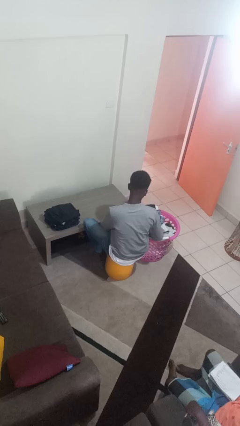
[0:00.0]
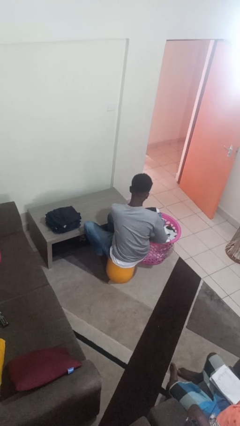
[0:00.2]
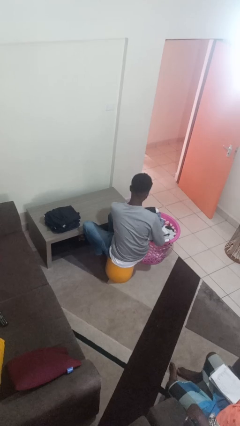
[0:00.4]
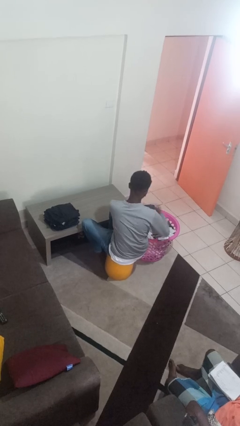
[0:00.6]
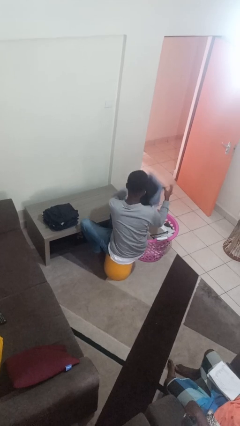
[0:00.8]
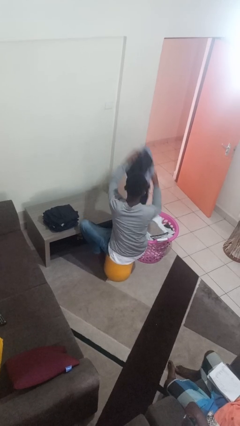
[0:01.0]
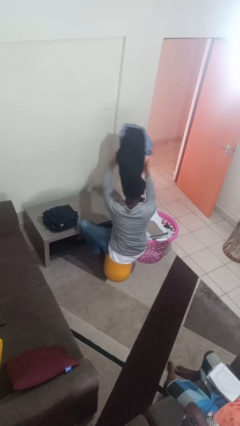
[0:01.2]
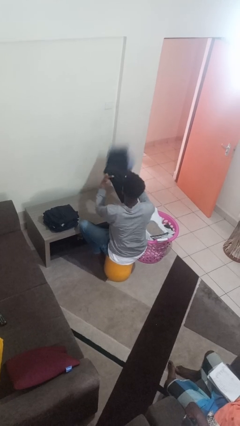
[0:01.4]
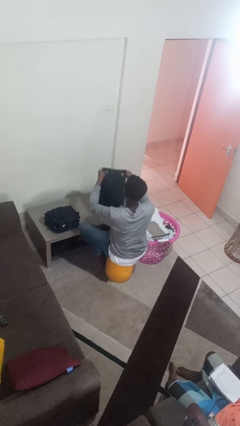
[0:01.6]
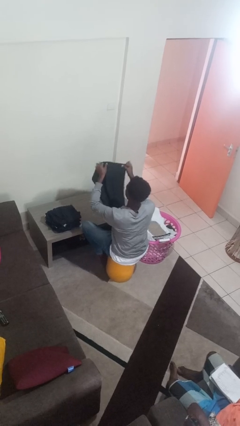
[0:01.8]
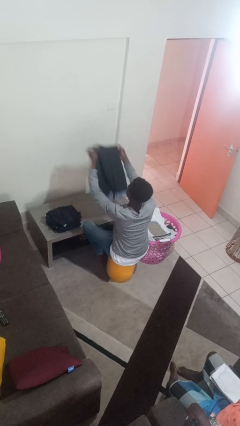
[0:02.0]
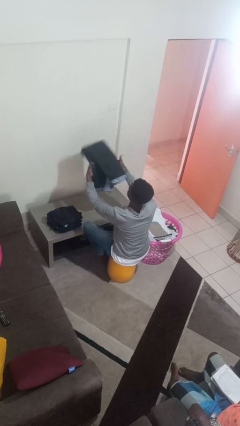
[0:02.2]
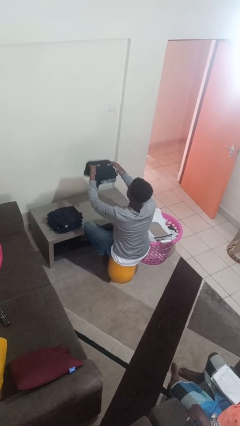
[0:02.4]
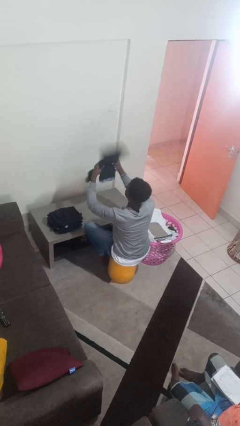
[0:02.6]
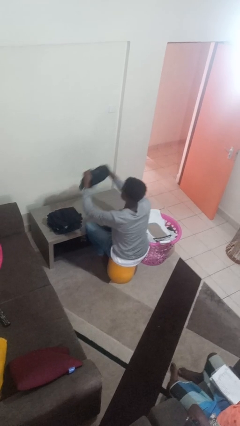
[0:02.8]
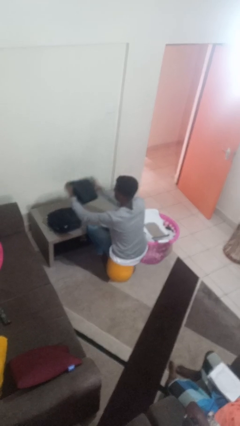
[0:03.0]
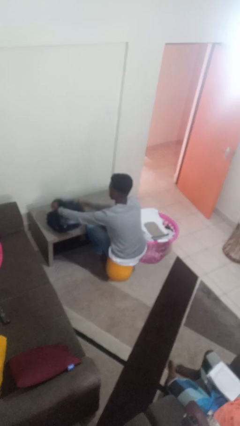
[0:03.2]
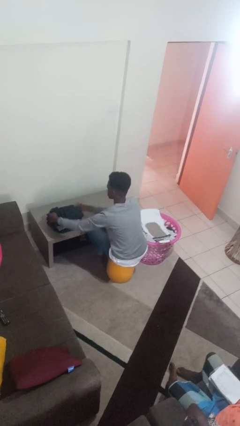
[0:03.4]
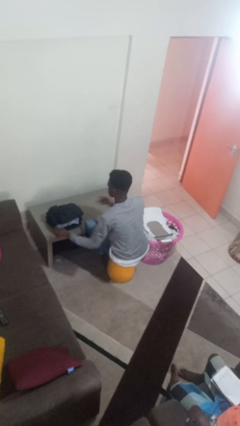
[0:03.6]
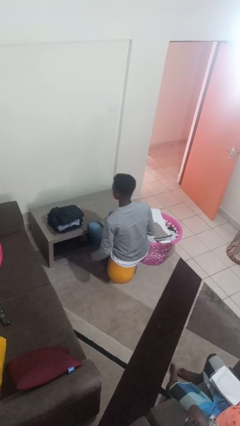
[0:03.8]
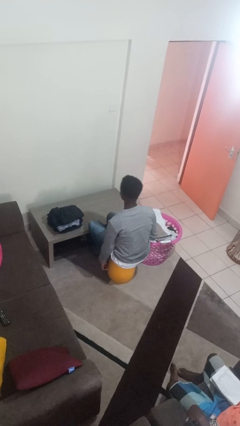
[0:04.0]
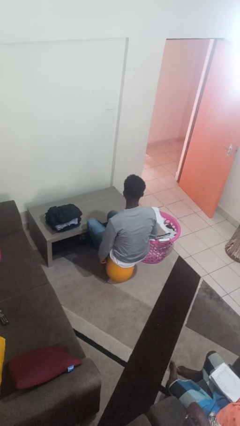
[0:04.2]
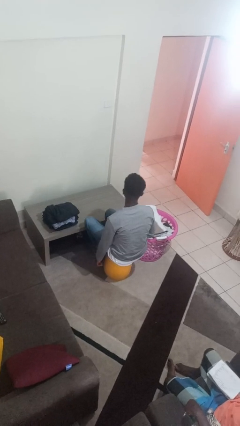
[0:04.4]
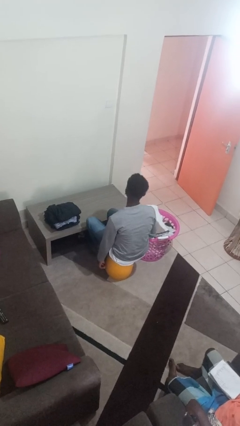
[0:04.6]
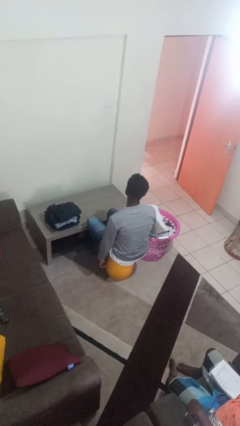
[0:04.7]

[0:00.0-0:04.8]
person folds pants

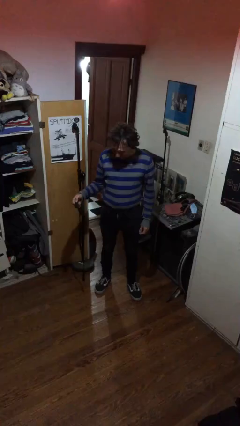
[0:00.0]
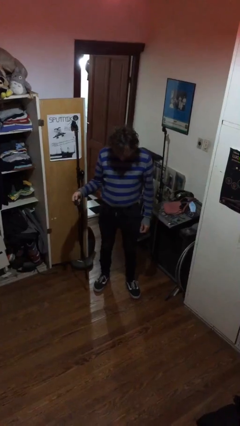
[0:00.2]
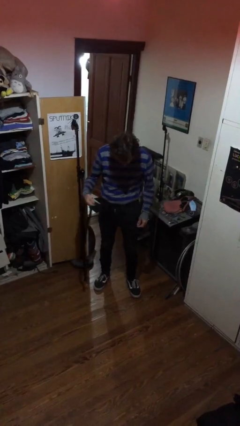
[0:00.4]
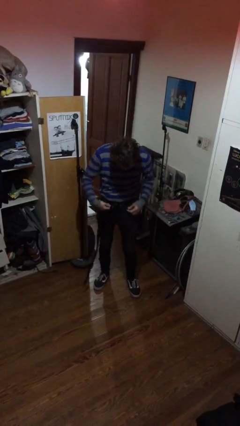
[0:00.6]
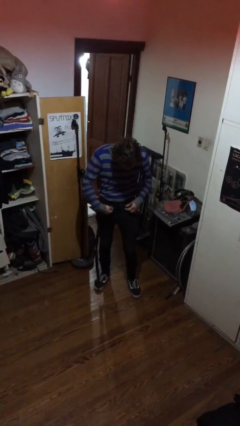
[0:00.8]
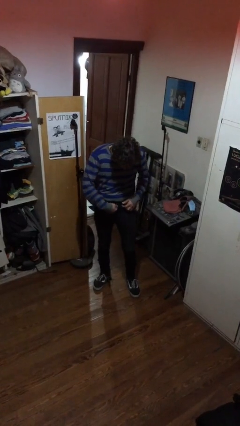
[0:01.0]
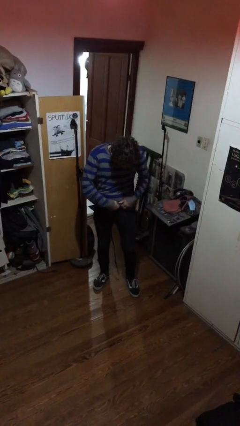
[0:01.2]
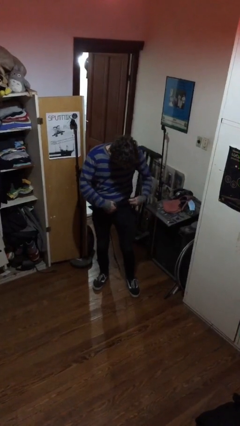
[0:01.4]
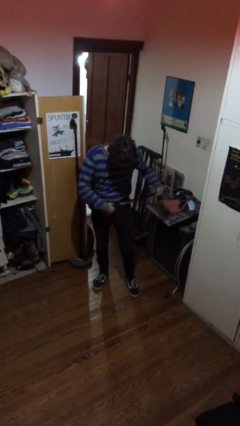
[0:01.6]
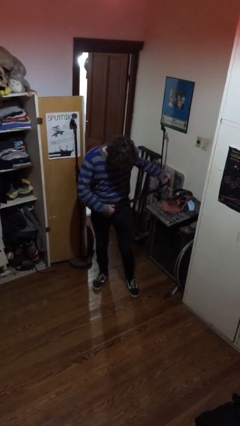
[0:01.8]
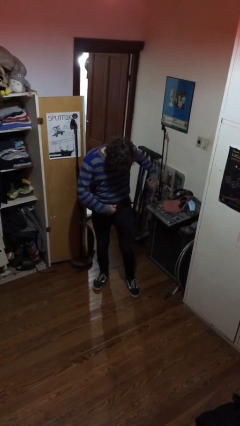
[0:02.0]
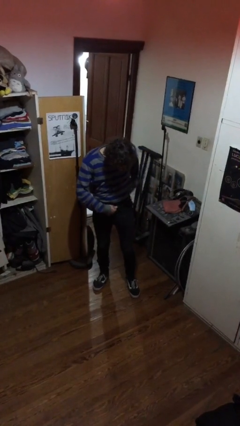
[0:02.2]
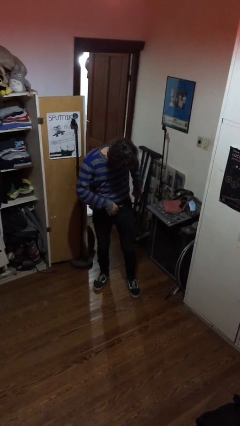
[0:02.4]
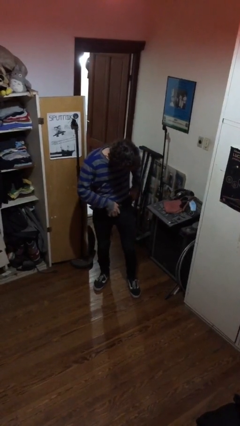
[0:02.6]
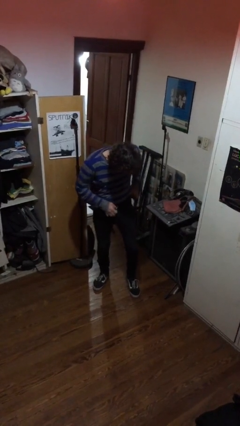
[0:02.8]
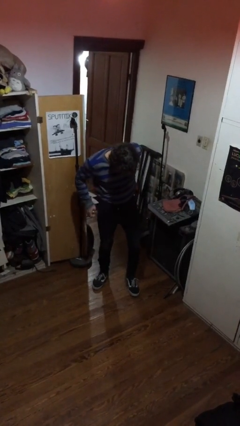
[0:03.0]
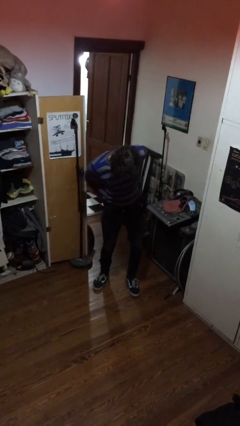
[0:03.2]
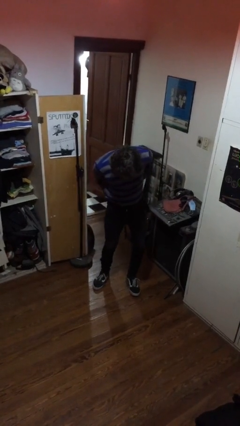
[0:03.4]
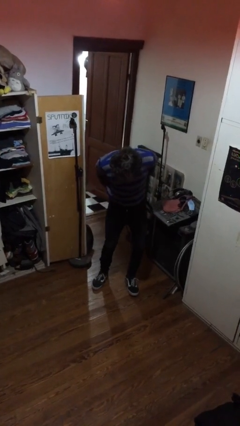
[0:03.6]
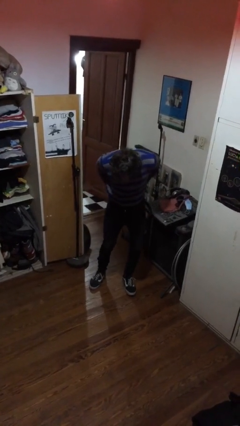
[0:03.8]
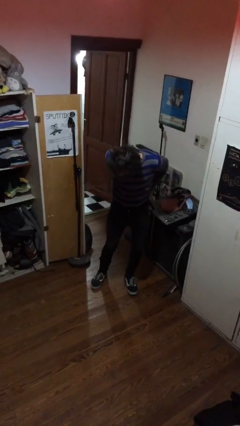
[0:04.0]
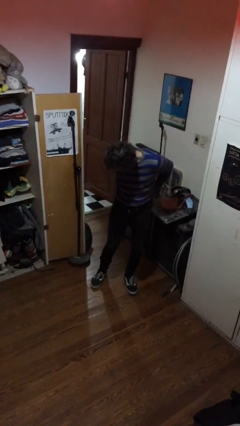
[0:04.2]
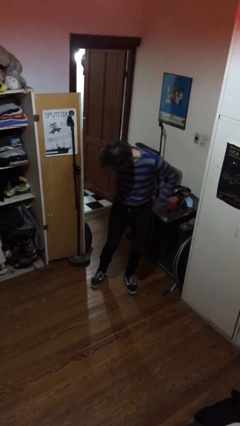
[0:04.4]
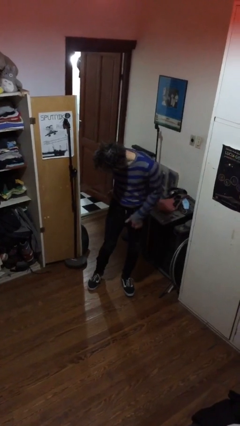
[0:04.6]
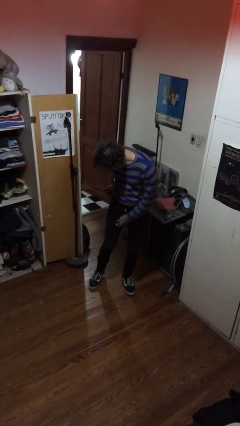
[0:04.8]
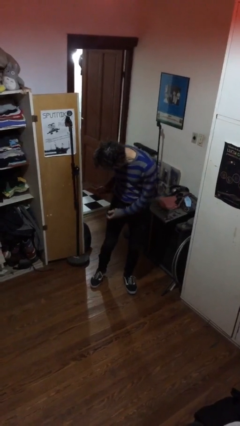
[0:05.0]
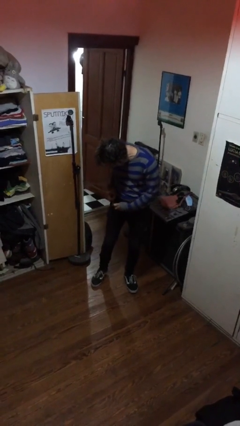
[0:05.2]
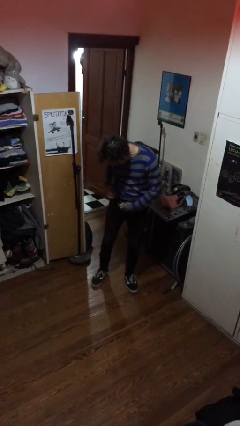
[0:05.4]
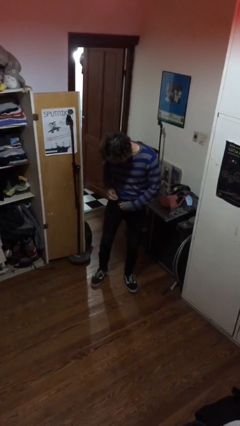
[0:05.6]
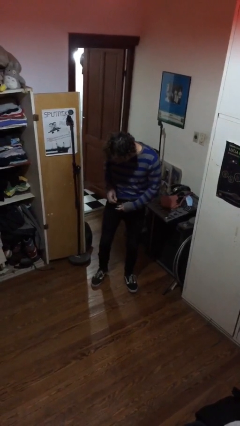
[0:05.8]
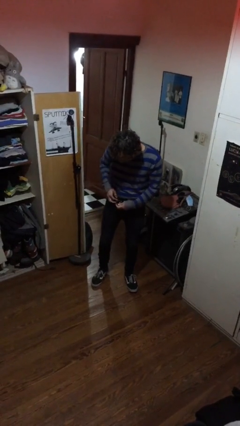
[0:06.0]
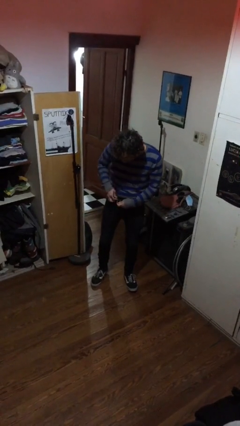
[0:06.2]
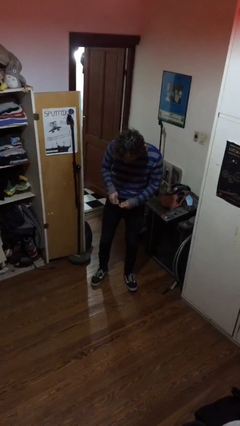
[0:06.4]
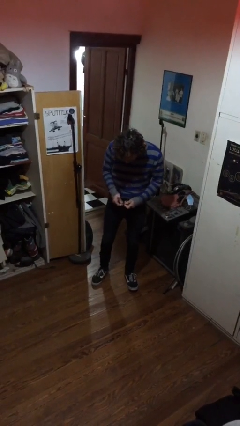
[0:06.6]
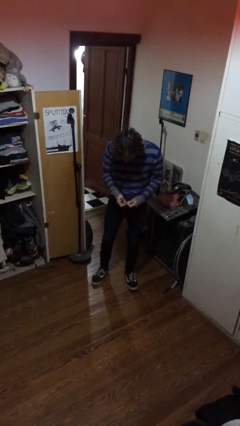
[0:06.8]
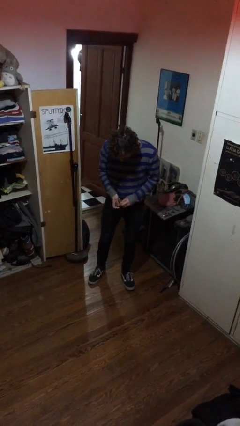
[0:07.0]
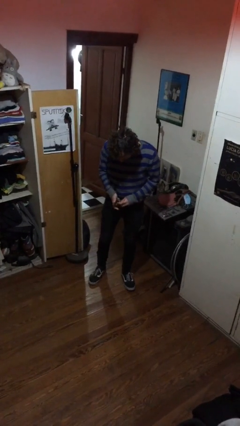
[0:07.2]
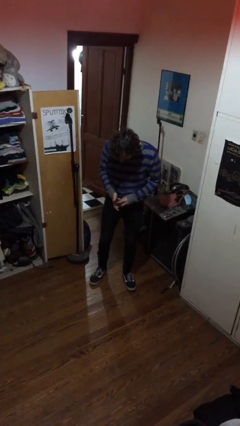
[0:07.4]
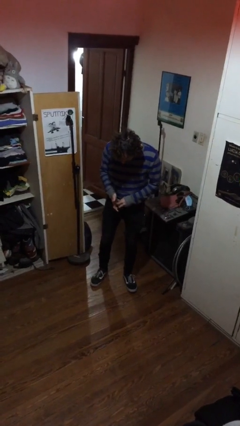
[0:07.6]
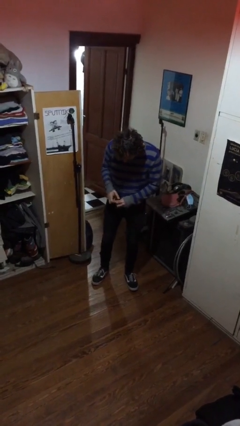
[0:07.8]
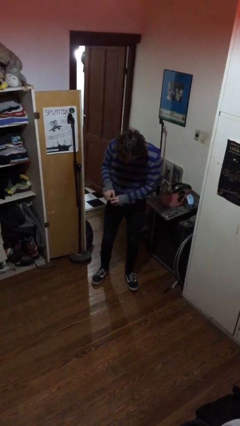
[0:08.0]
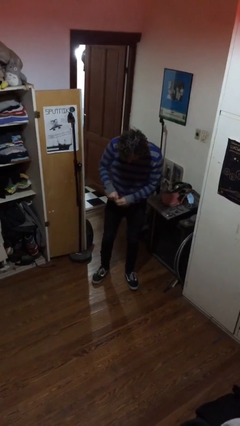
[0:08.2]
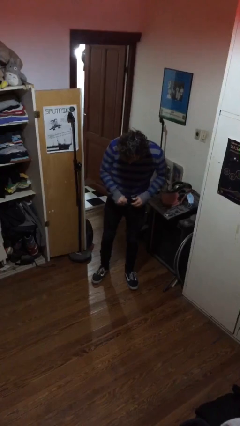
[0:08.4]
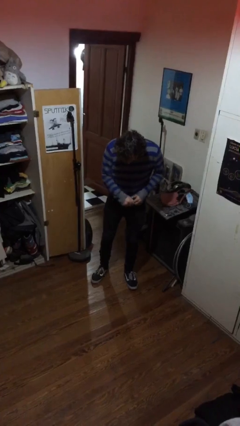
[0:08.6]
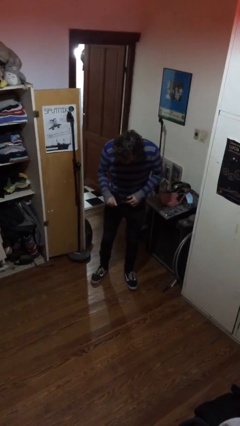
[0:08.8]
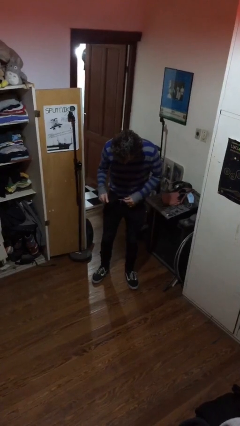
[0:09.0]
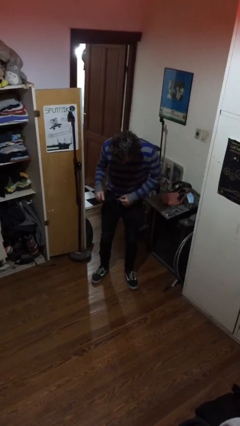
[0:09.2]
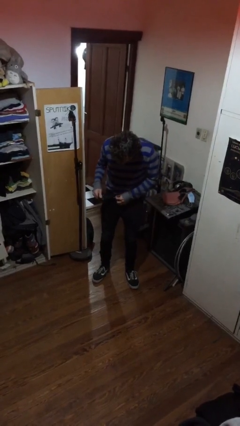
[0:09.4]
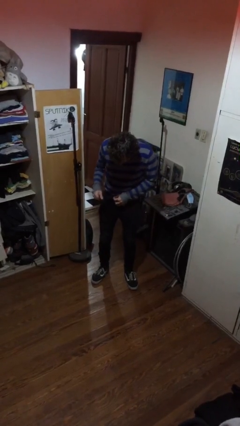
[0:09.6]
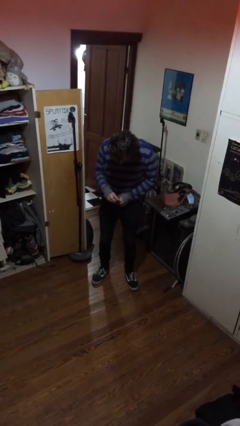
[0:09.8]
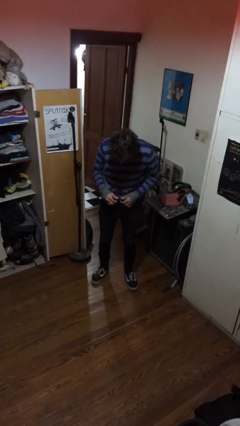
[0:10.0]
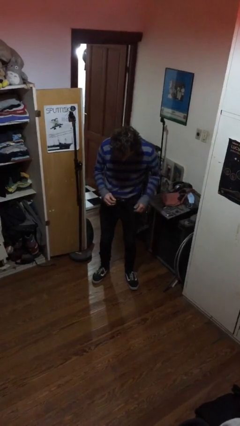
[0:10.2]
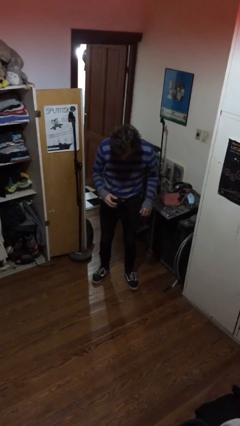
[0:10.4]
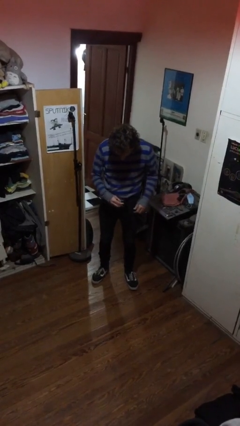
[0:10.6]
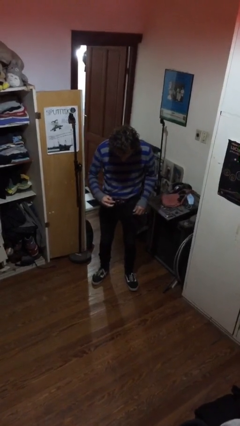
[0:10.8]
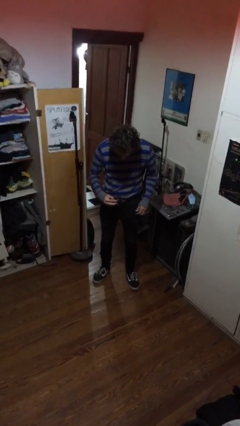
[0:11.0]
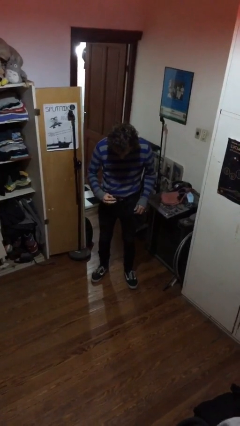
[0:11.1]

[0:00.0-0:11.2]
person puts on belt

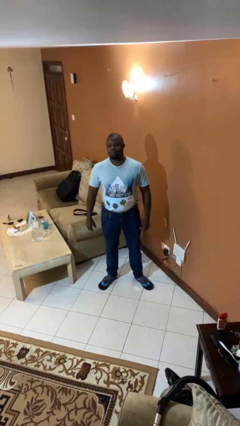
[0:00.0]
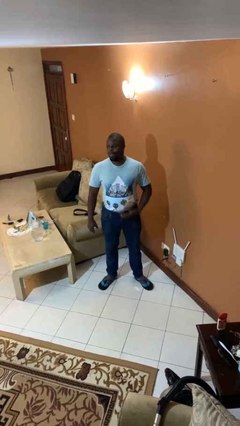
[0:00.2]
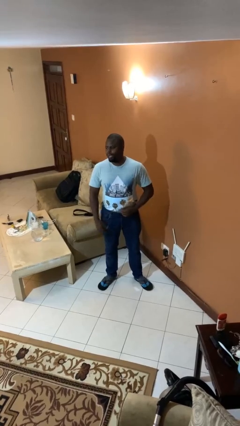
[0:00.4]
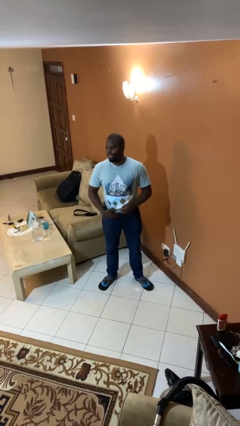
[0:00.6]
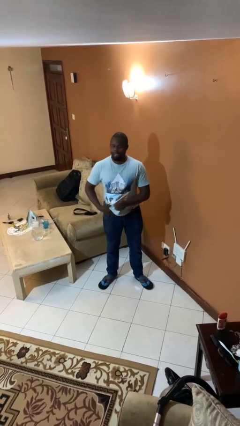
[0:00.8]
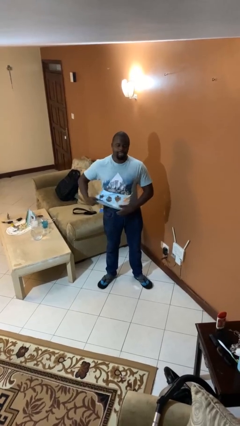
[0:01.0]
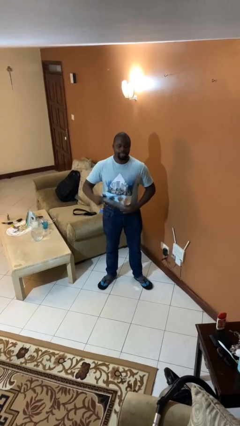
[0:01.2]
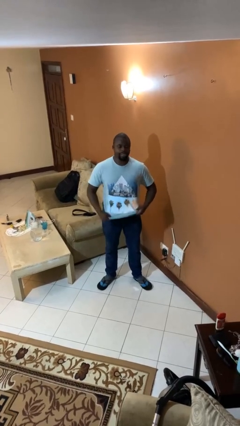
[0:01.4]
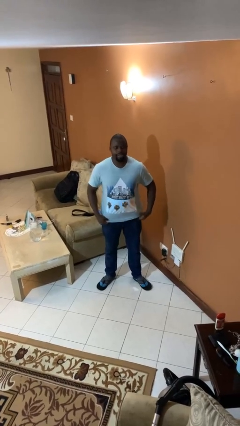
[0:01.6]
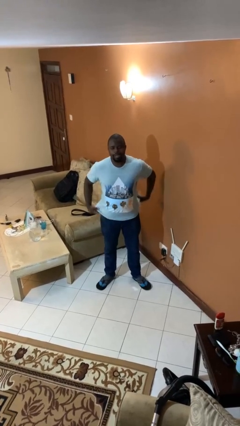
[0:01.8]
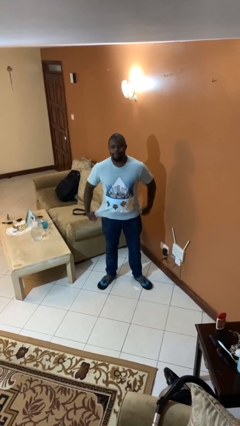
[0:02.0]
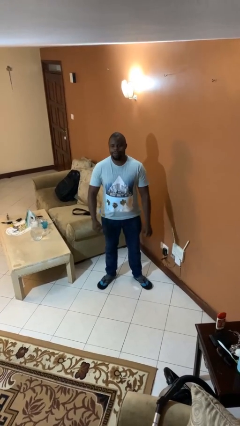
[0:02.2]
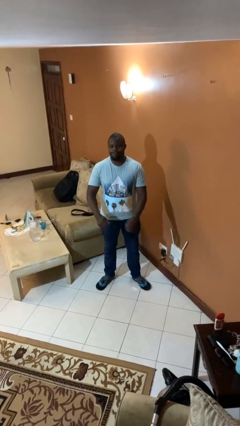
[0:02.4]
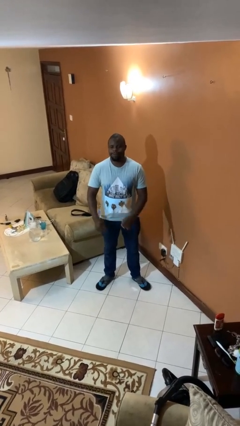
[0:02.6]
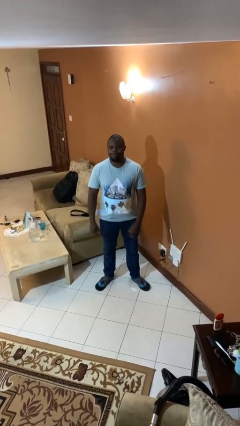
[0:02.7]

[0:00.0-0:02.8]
person untucks shirt
